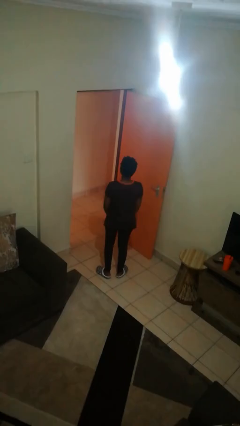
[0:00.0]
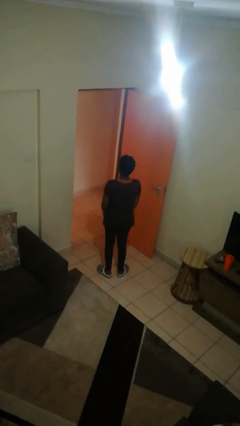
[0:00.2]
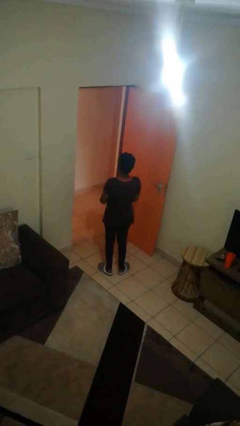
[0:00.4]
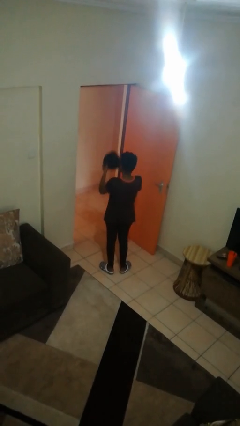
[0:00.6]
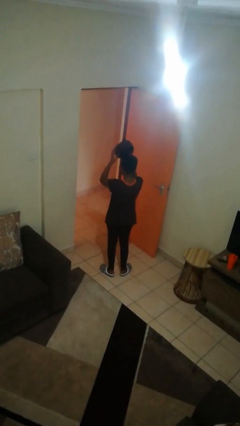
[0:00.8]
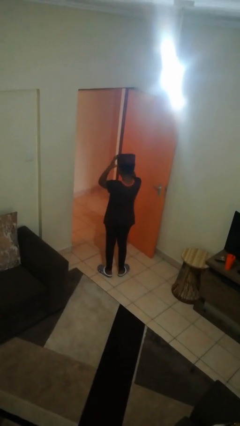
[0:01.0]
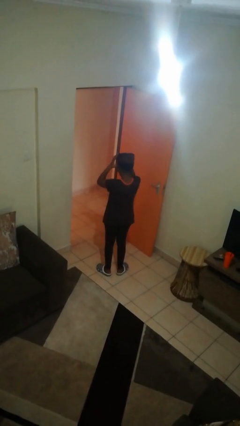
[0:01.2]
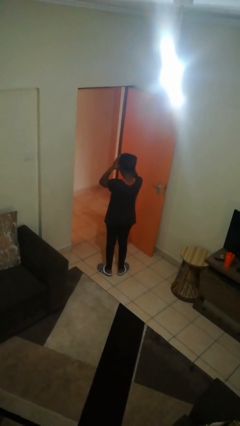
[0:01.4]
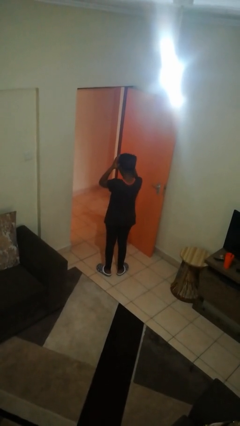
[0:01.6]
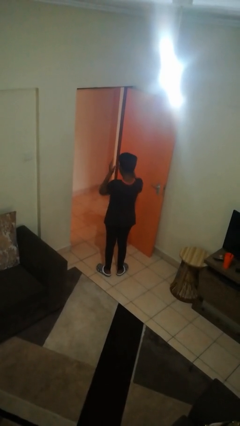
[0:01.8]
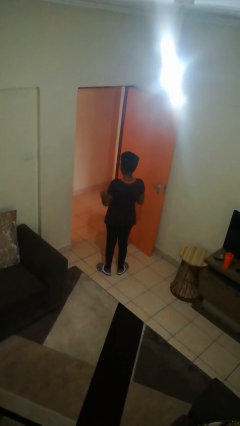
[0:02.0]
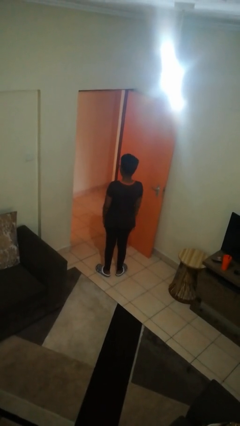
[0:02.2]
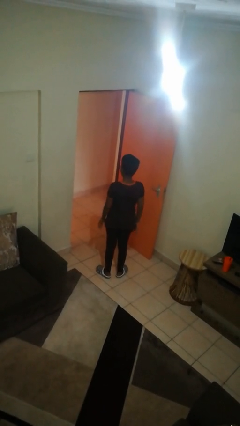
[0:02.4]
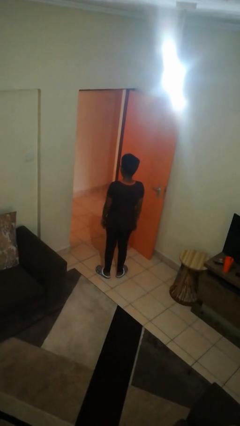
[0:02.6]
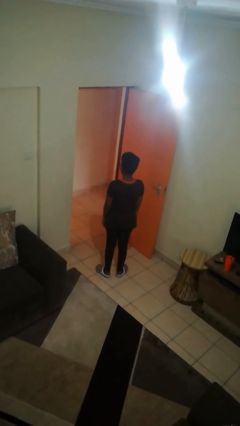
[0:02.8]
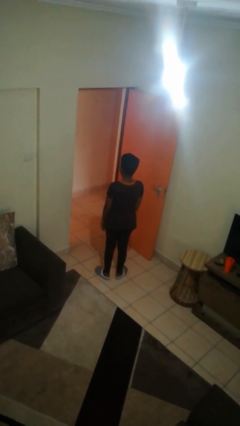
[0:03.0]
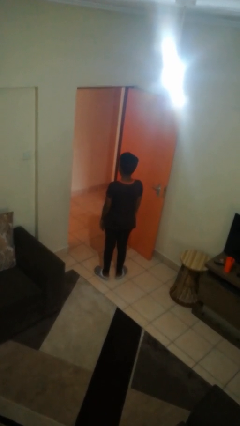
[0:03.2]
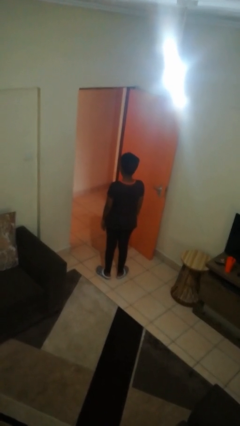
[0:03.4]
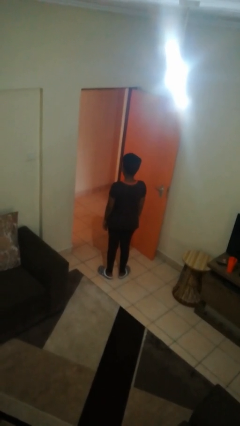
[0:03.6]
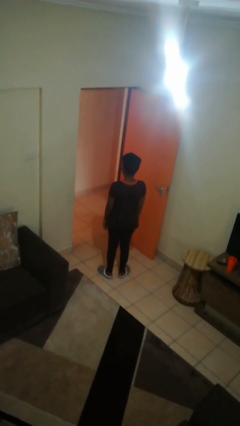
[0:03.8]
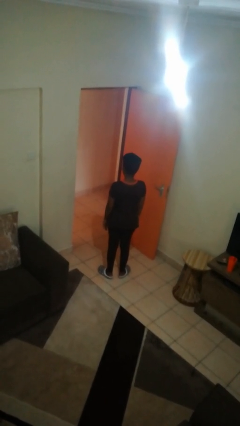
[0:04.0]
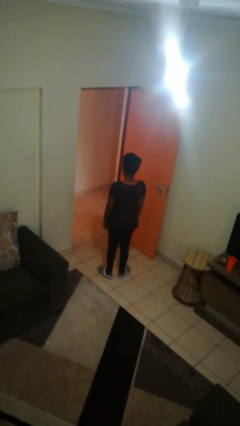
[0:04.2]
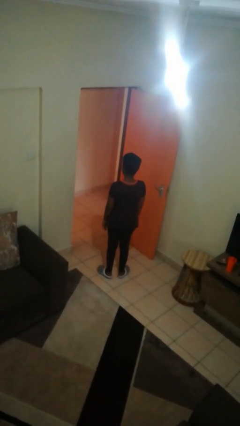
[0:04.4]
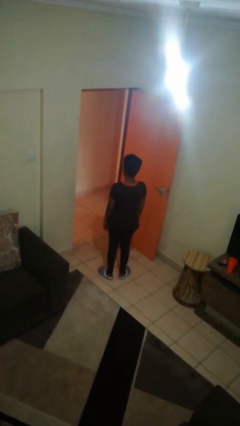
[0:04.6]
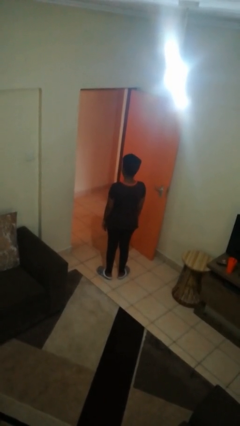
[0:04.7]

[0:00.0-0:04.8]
person puts on hat

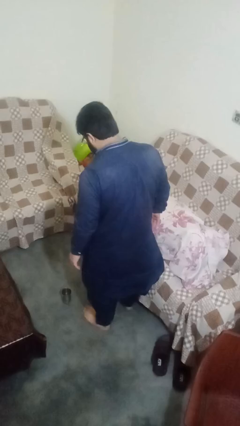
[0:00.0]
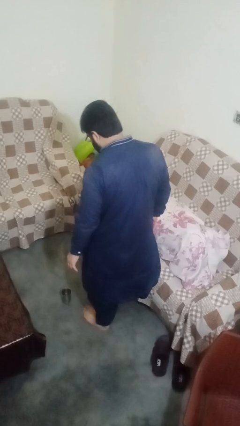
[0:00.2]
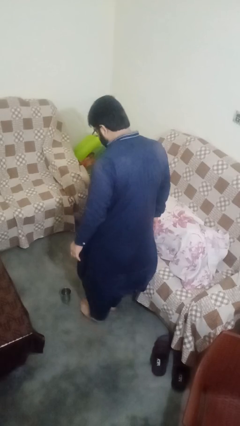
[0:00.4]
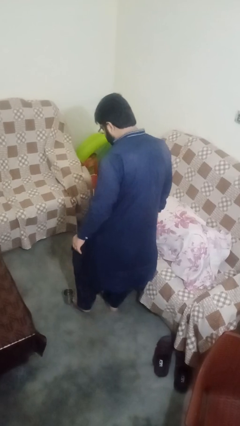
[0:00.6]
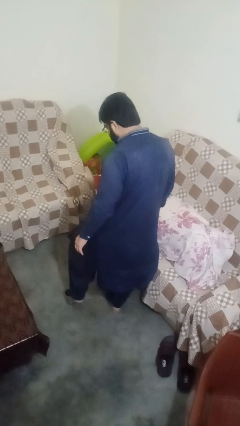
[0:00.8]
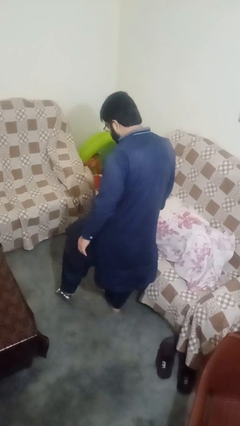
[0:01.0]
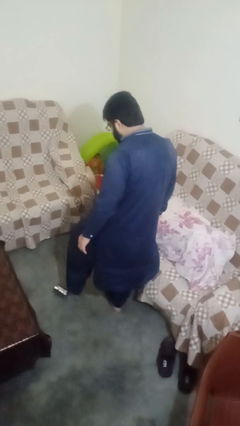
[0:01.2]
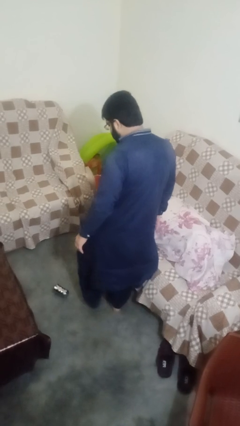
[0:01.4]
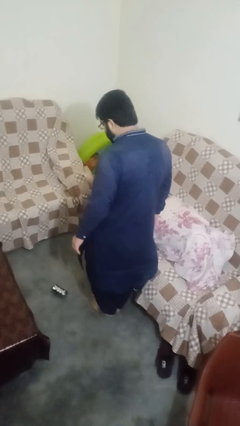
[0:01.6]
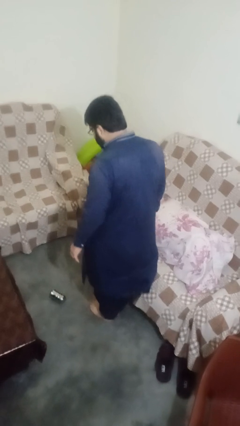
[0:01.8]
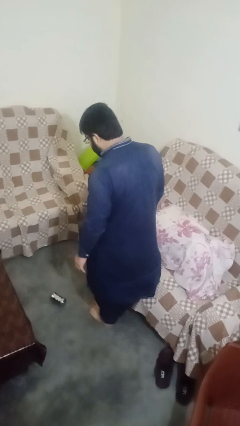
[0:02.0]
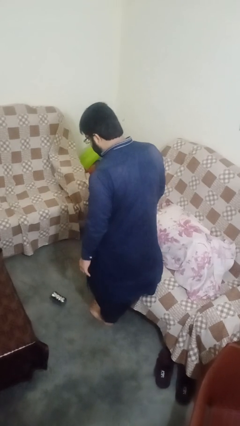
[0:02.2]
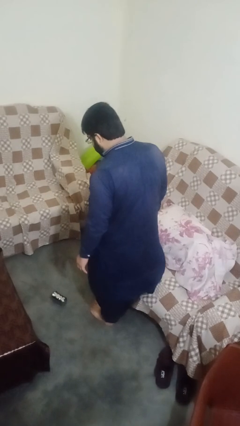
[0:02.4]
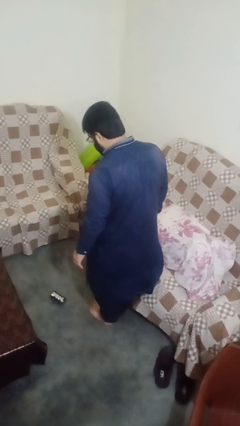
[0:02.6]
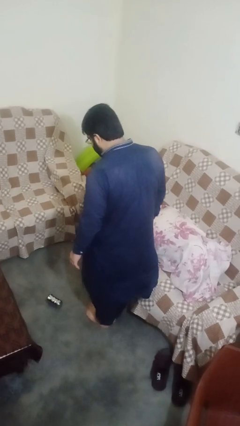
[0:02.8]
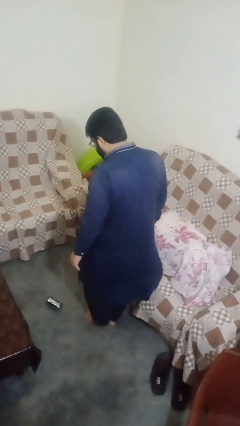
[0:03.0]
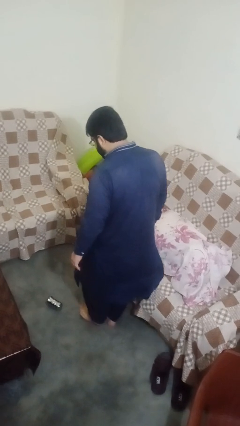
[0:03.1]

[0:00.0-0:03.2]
person spills on floor

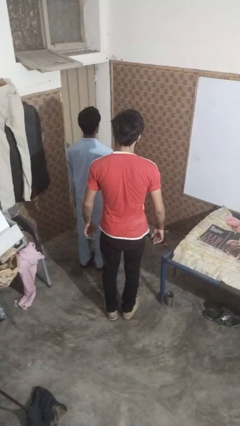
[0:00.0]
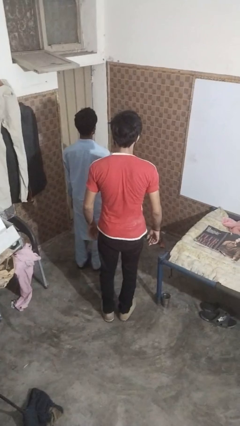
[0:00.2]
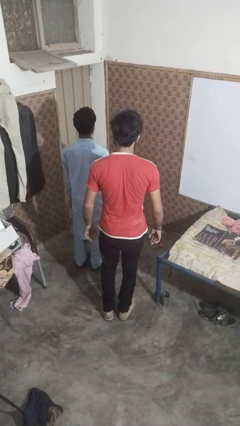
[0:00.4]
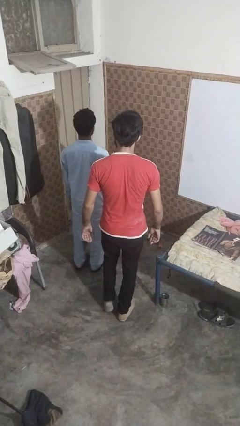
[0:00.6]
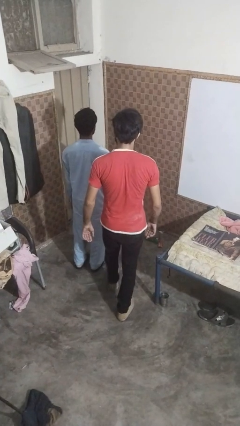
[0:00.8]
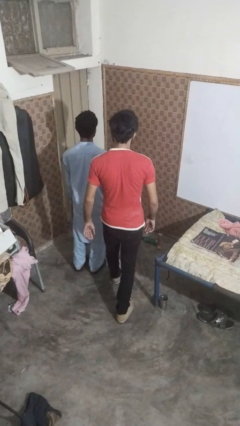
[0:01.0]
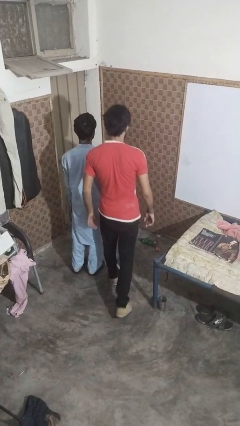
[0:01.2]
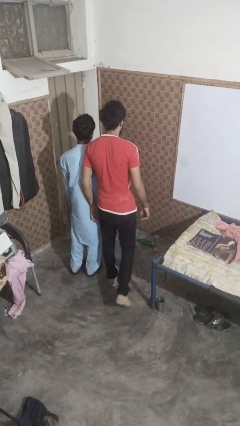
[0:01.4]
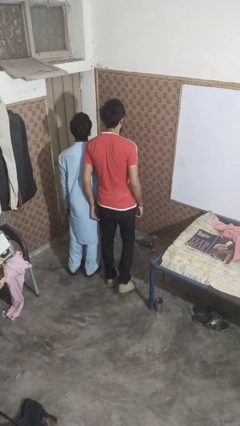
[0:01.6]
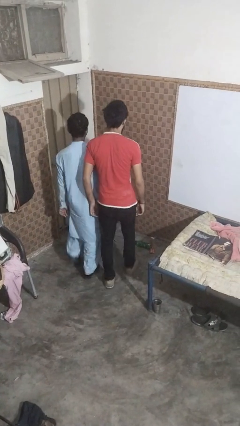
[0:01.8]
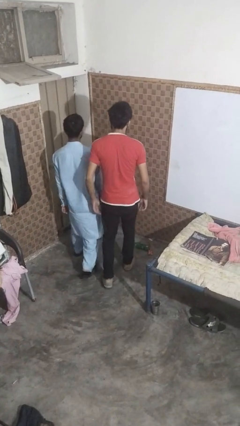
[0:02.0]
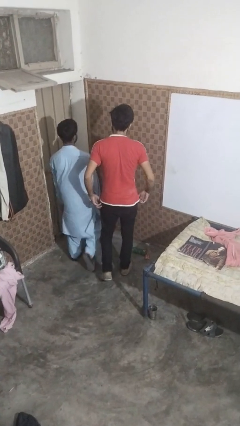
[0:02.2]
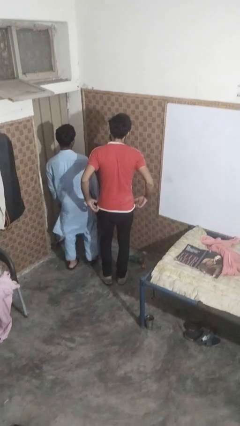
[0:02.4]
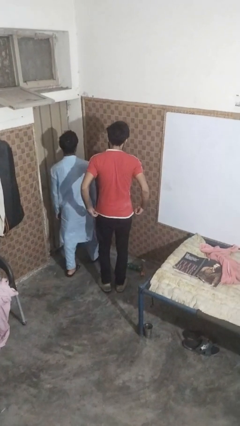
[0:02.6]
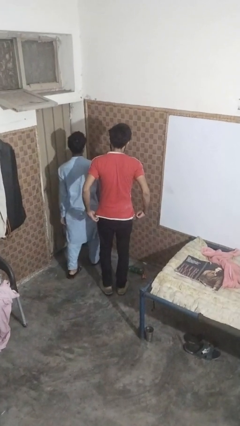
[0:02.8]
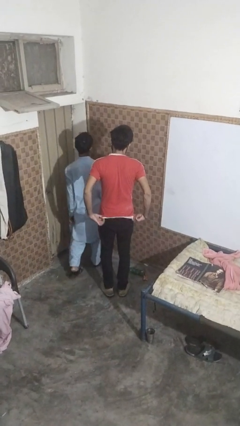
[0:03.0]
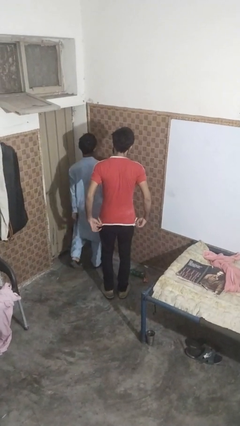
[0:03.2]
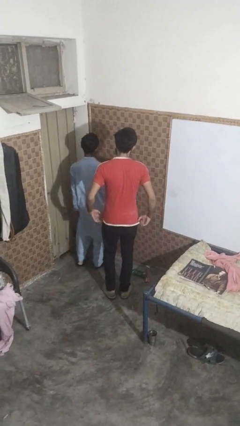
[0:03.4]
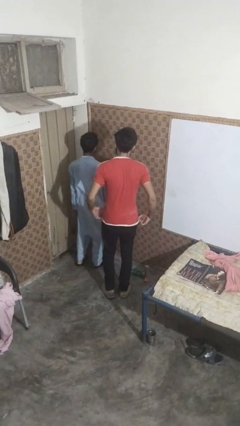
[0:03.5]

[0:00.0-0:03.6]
person bumps into person

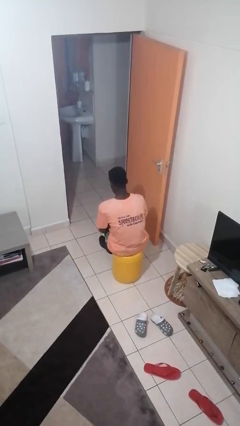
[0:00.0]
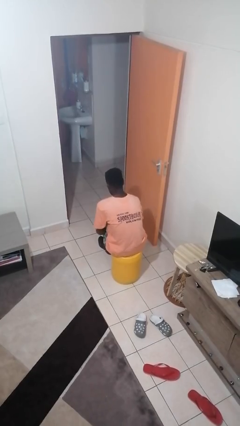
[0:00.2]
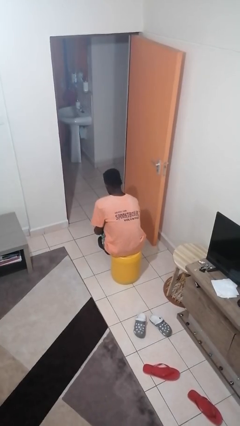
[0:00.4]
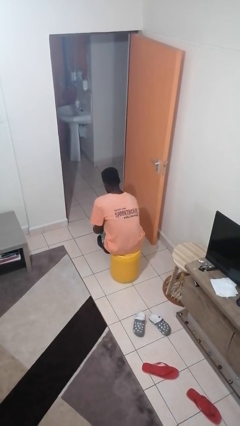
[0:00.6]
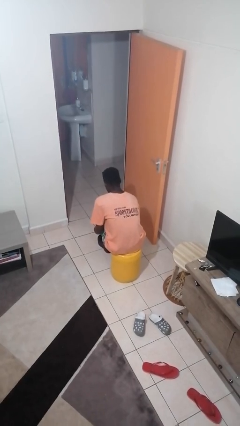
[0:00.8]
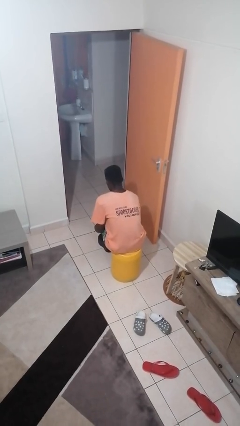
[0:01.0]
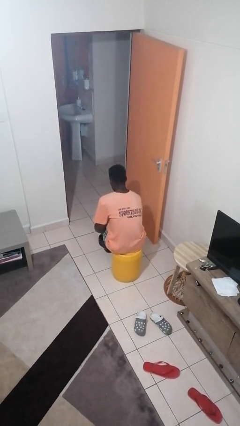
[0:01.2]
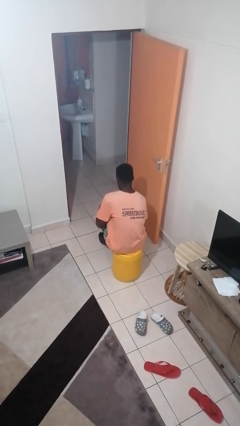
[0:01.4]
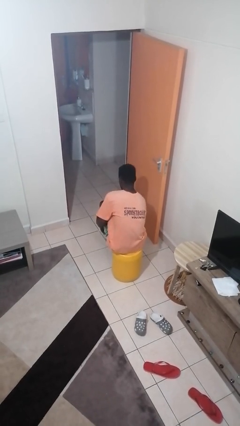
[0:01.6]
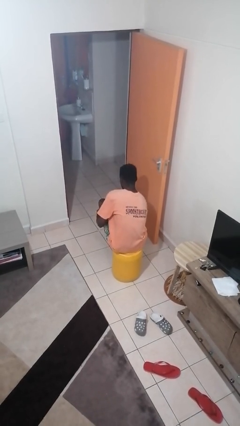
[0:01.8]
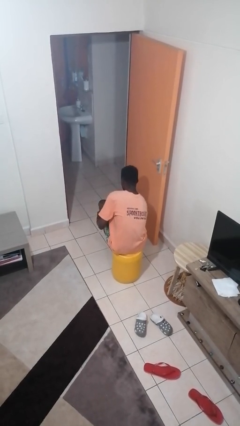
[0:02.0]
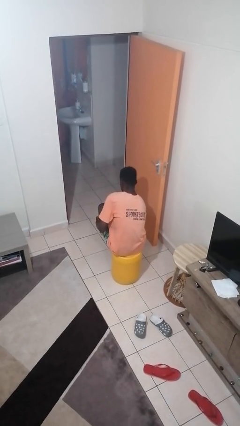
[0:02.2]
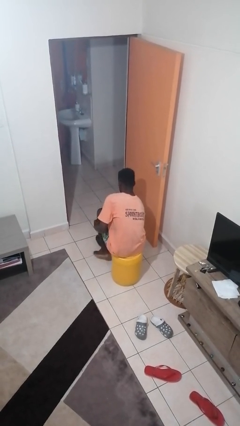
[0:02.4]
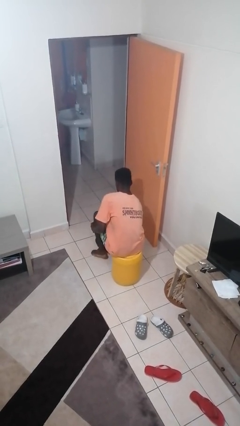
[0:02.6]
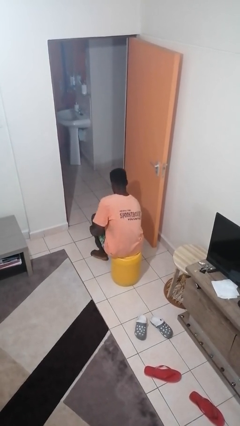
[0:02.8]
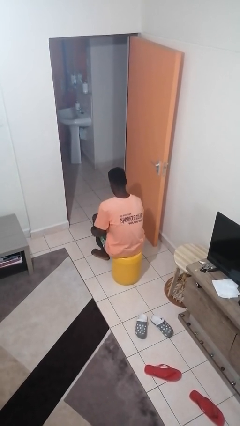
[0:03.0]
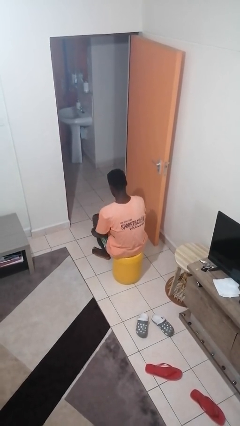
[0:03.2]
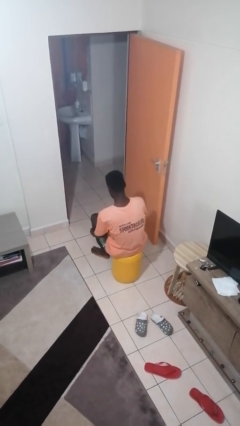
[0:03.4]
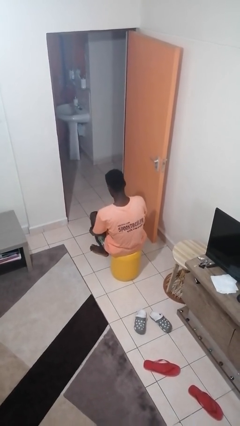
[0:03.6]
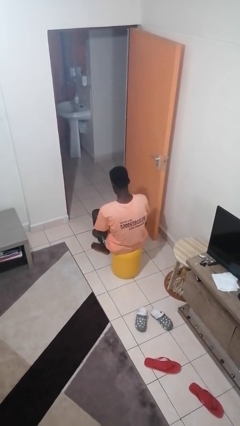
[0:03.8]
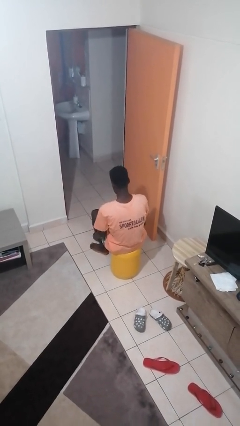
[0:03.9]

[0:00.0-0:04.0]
person takes off shoes

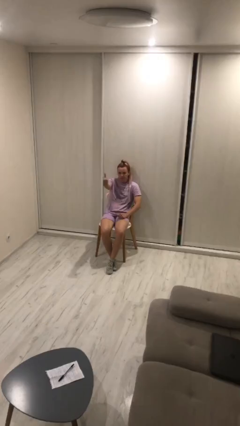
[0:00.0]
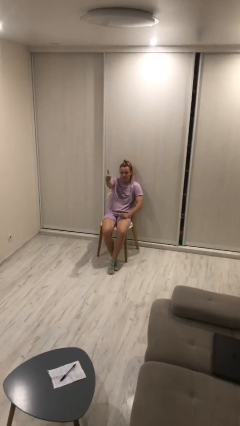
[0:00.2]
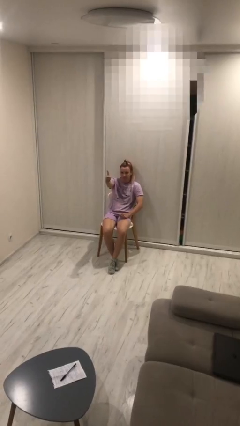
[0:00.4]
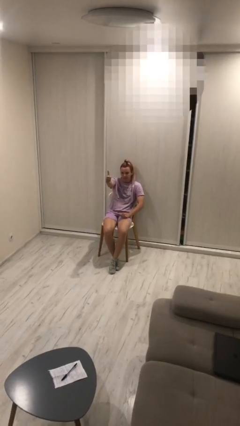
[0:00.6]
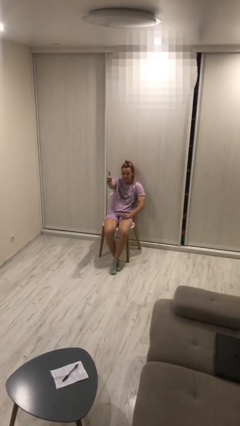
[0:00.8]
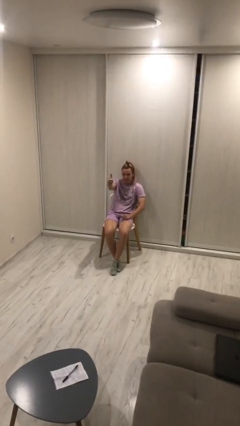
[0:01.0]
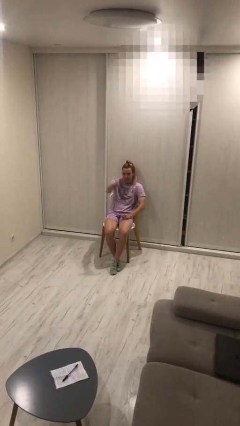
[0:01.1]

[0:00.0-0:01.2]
person gestures thumbs up

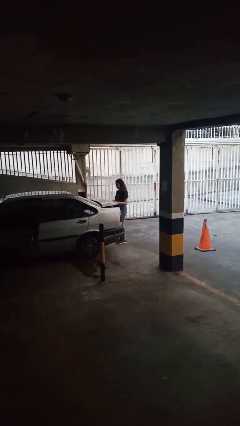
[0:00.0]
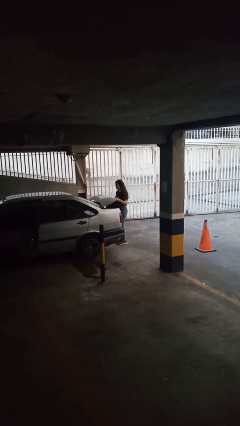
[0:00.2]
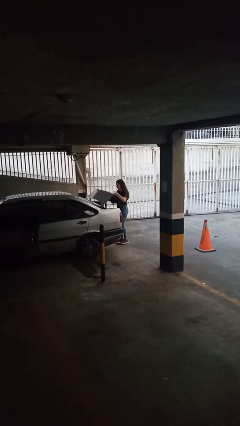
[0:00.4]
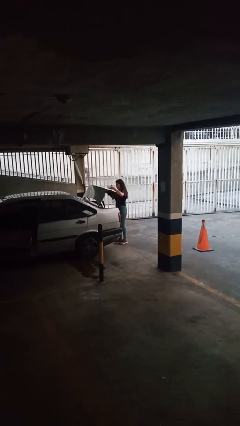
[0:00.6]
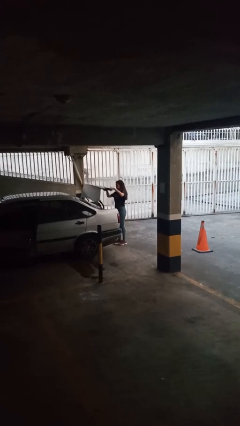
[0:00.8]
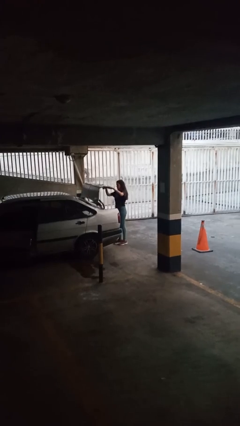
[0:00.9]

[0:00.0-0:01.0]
person opens car trunk
